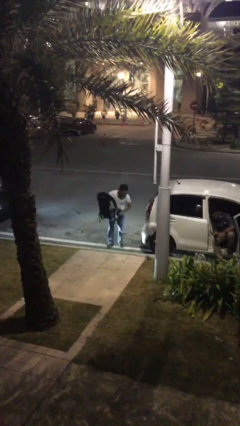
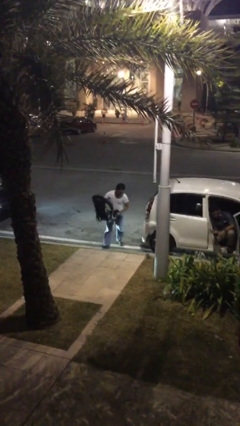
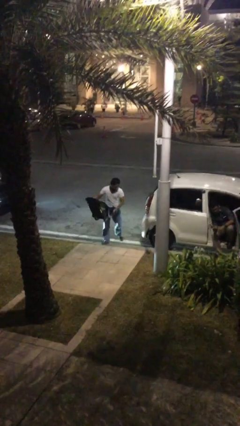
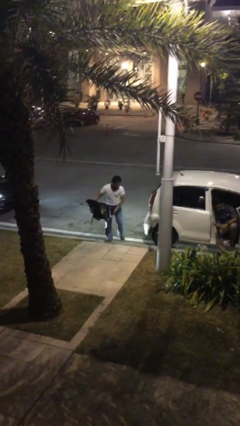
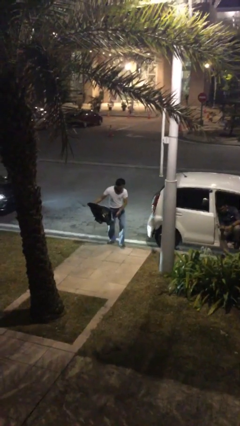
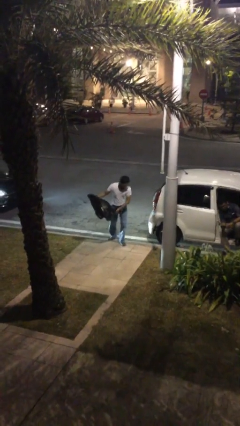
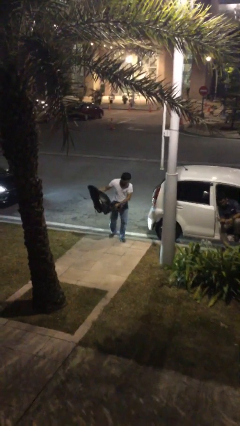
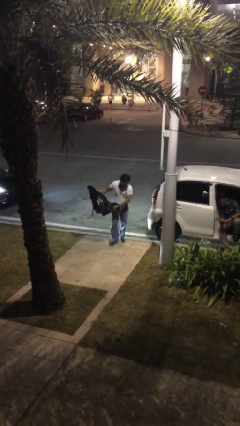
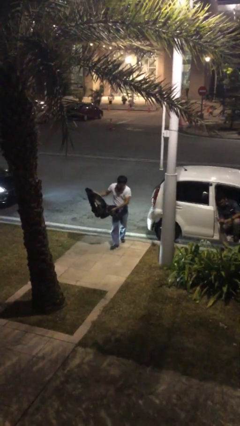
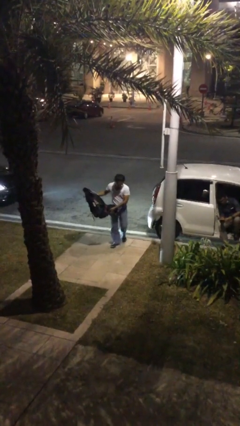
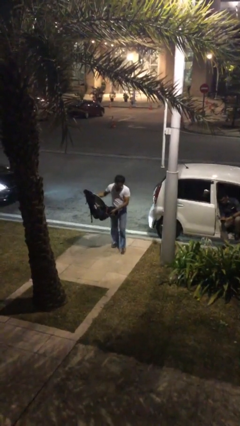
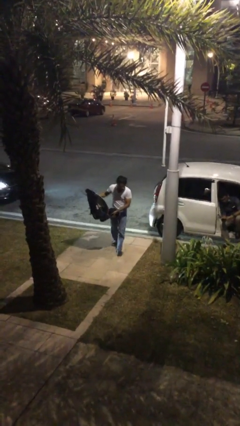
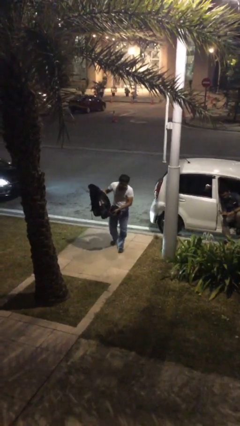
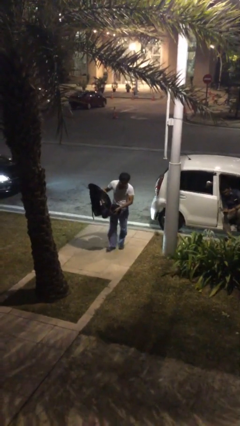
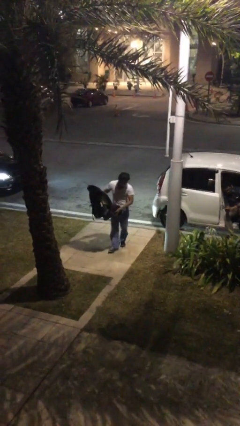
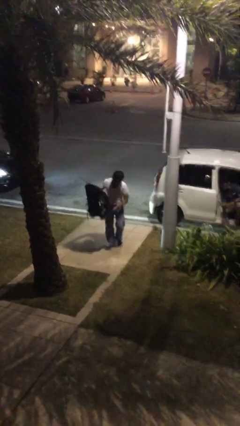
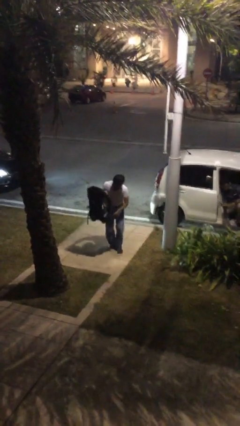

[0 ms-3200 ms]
person carries heavy object

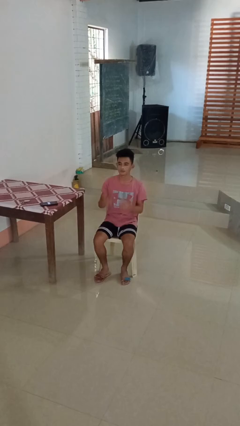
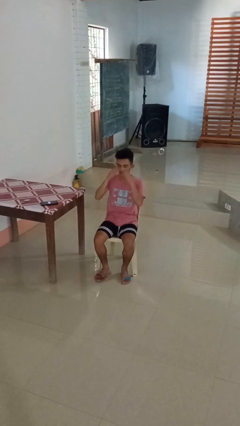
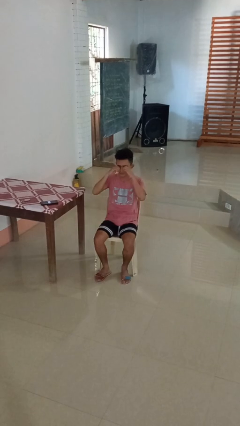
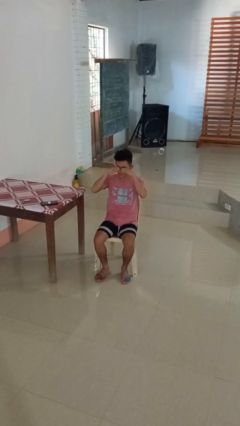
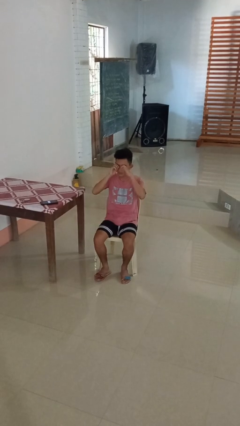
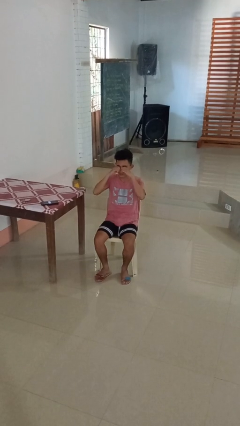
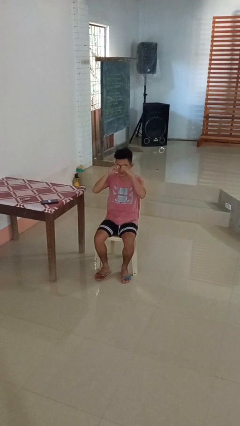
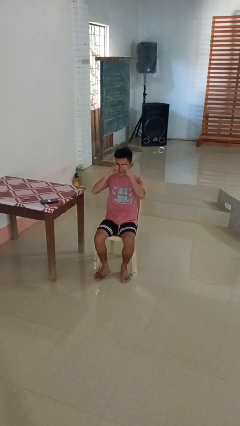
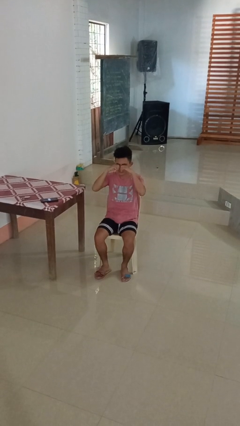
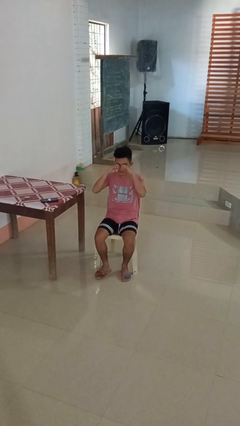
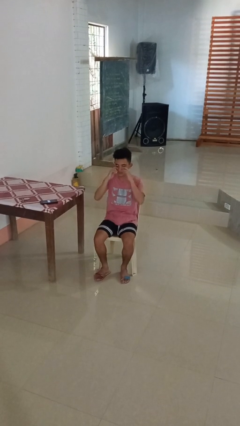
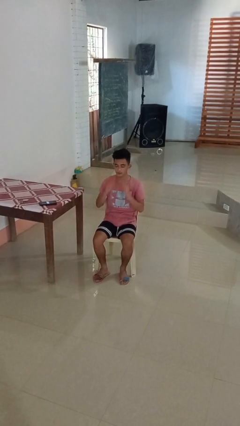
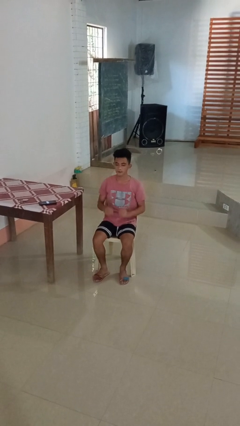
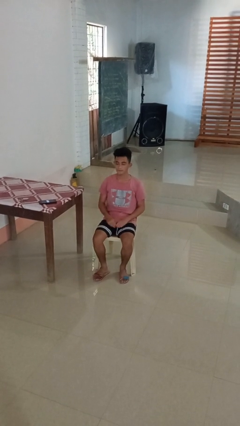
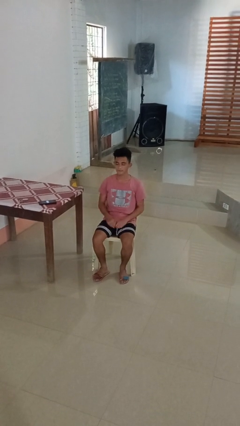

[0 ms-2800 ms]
person rubs eyes

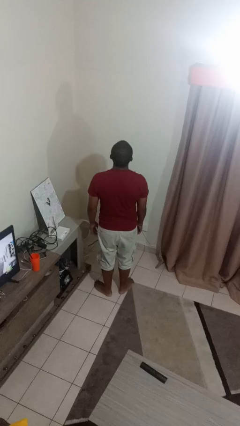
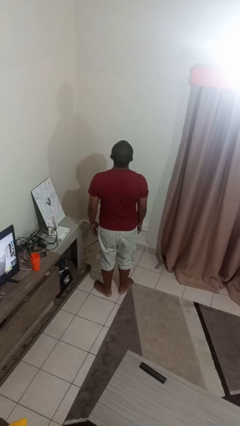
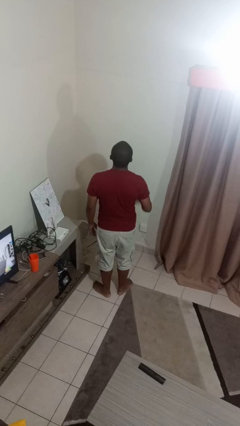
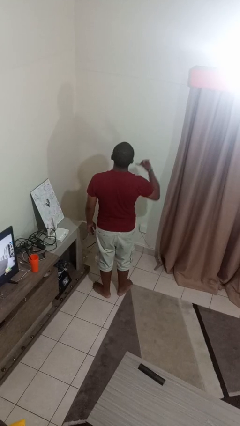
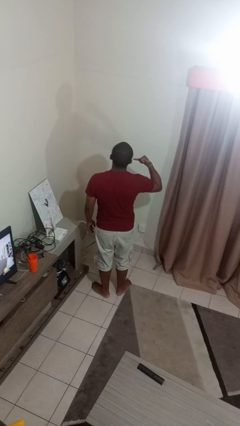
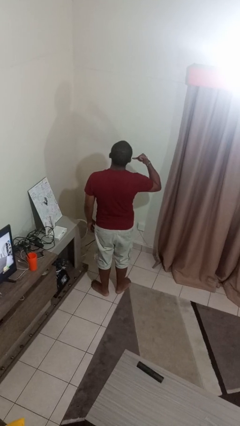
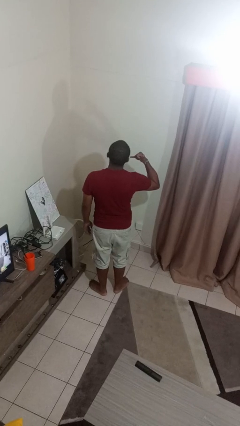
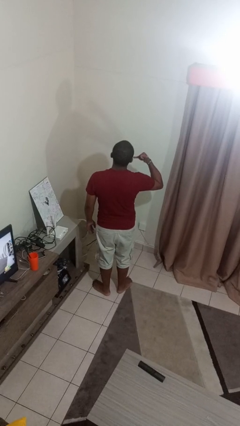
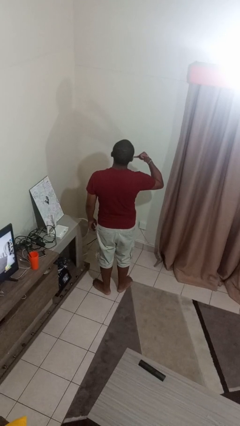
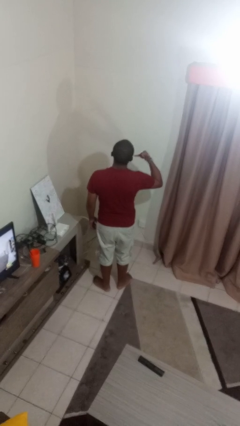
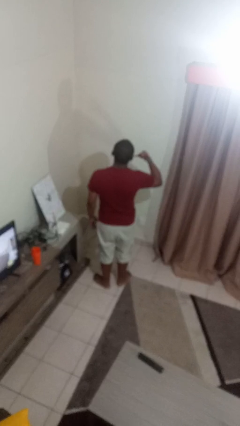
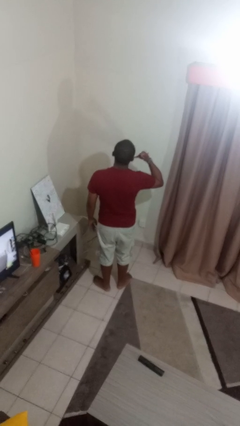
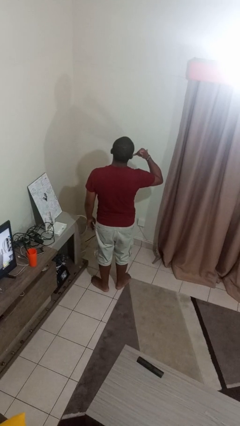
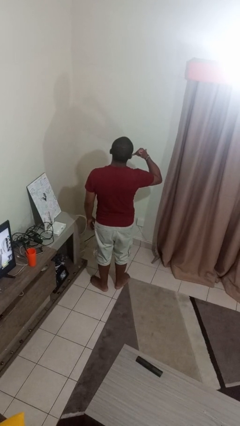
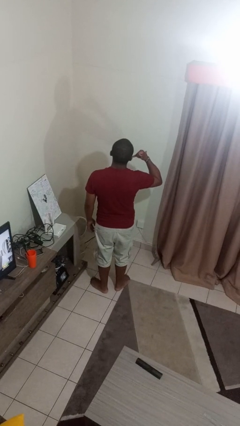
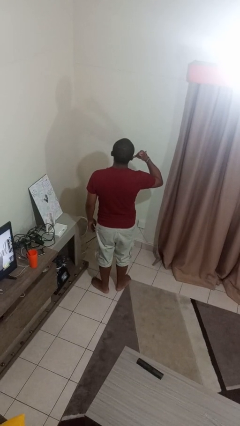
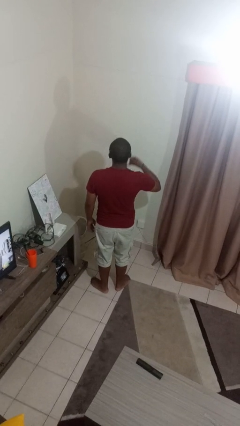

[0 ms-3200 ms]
person gestures call me

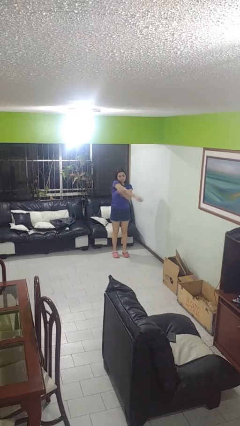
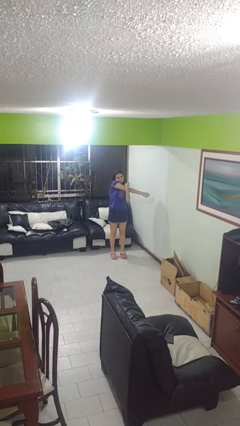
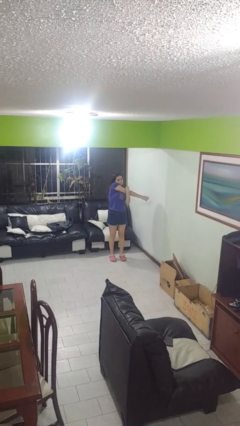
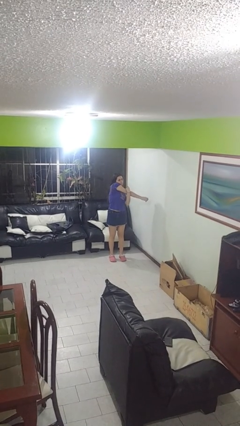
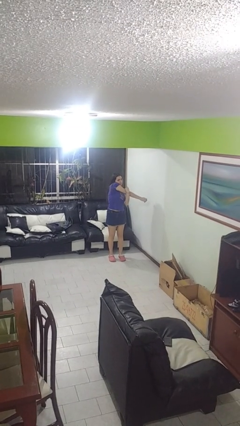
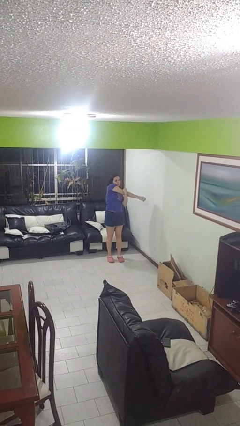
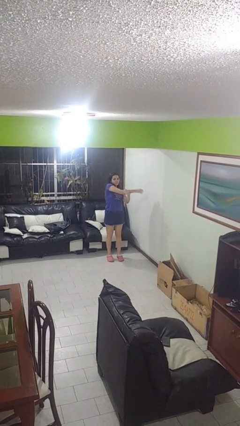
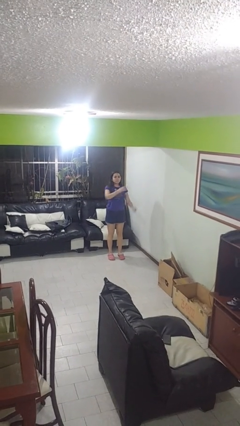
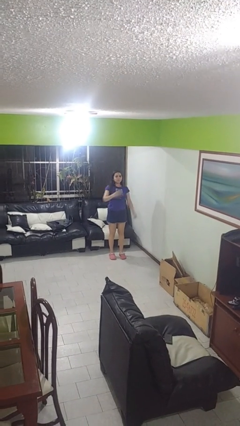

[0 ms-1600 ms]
person stretches arms to side

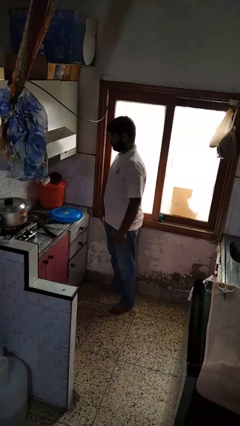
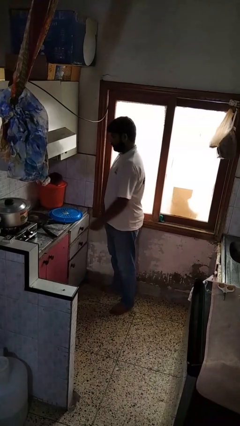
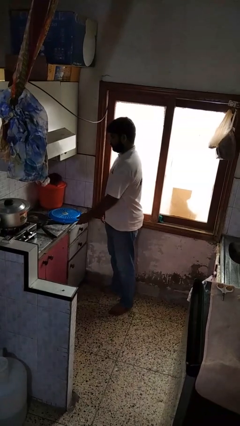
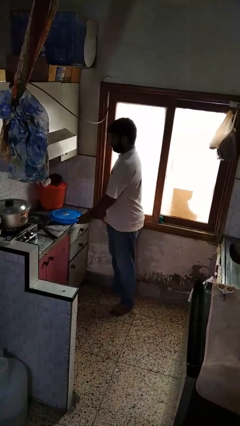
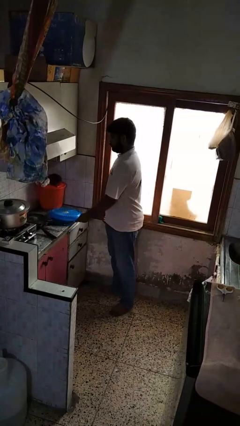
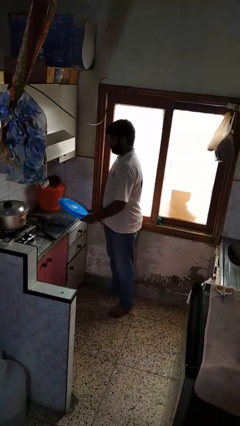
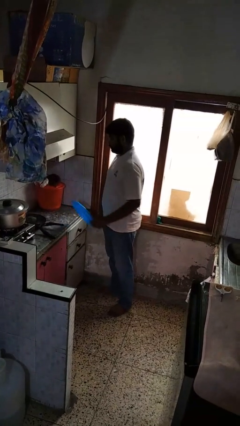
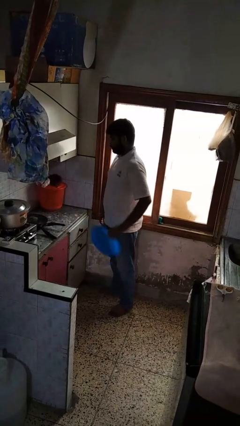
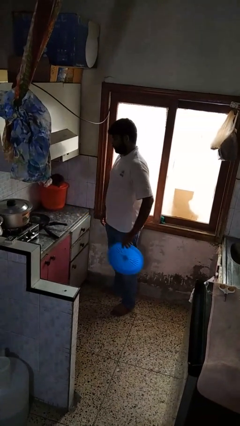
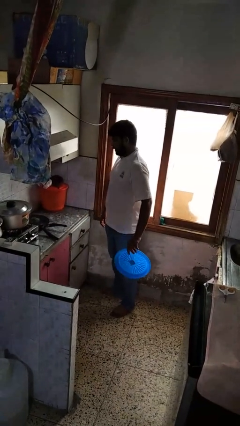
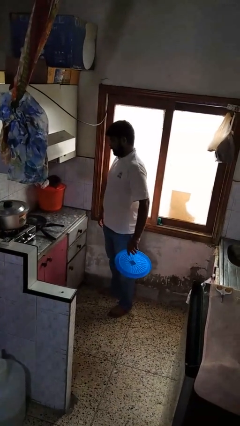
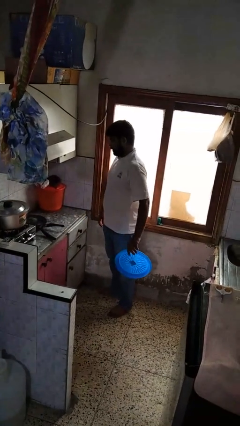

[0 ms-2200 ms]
person picks up object from countertop

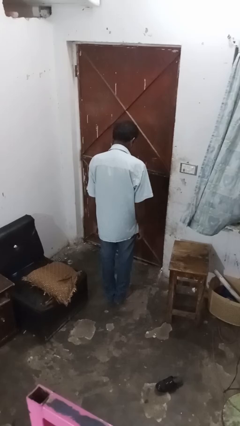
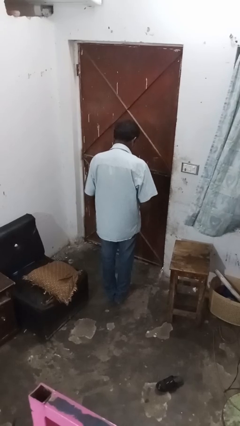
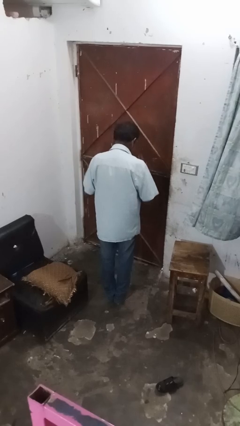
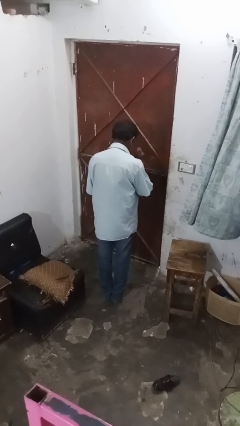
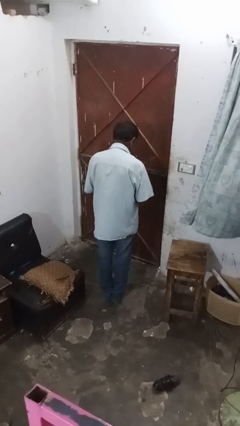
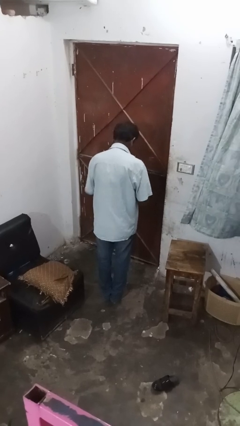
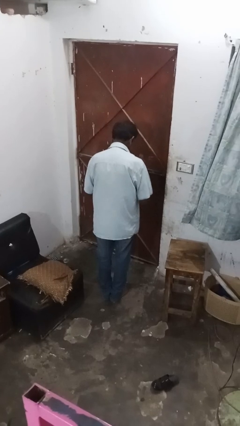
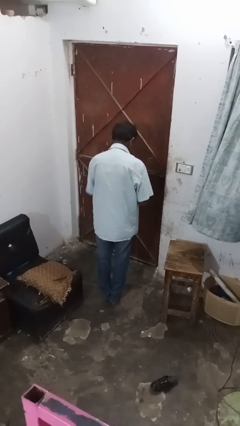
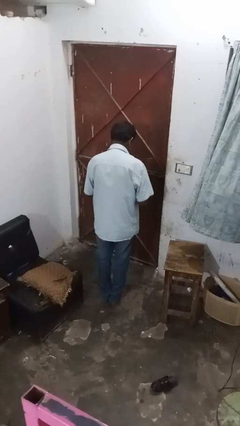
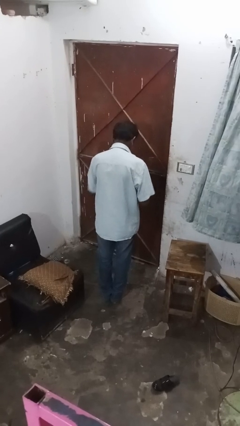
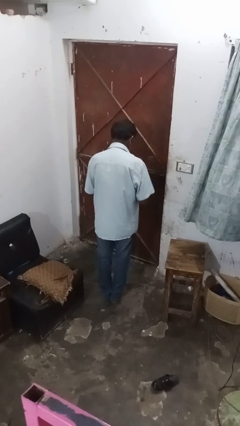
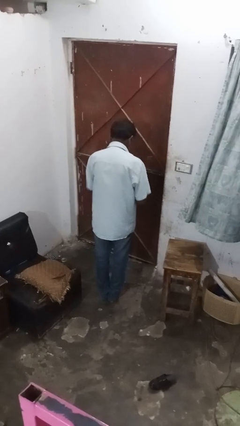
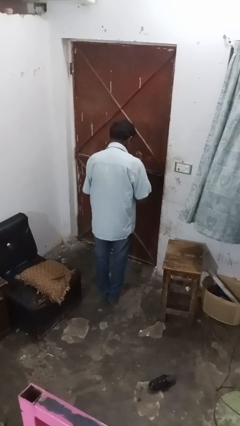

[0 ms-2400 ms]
person drums on chest

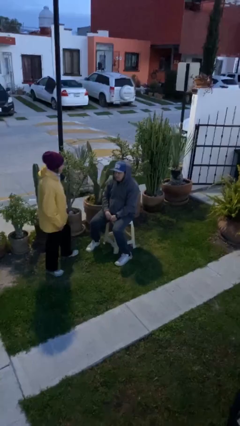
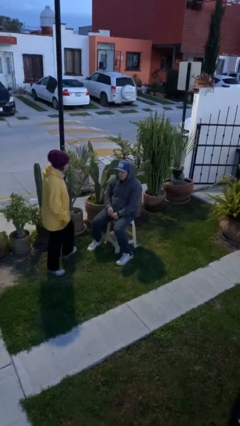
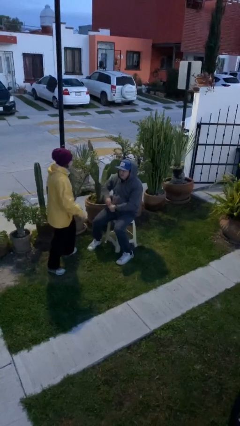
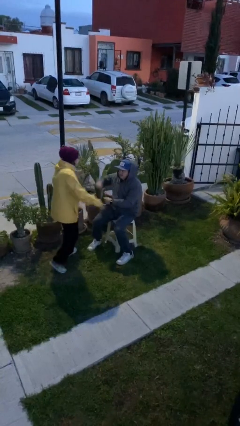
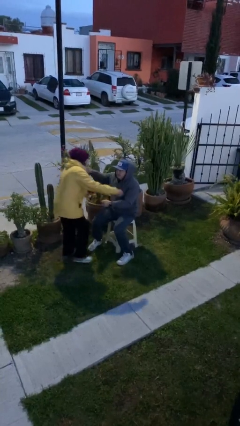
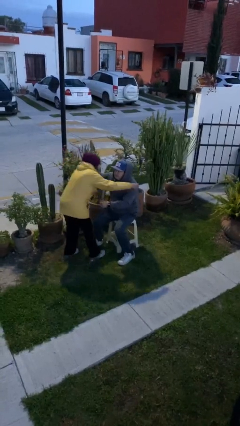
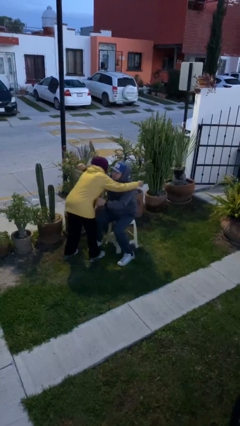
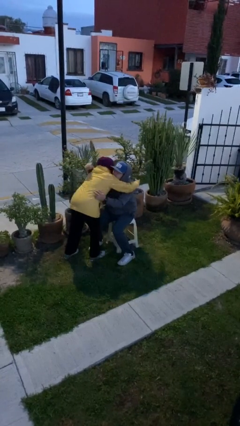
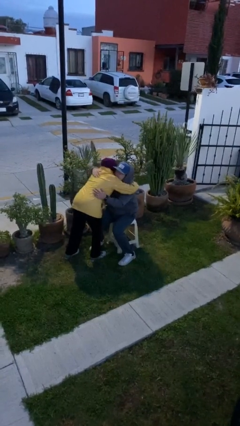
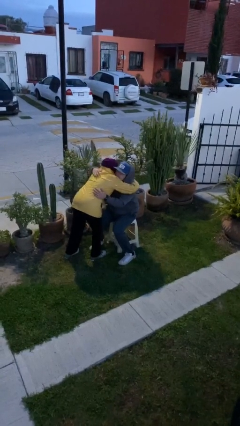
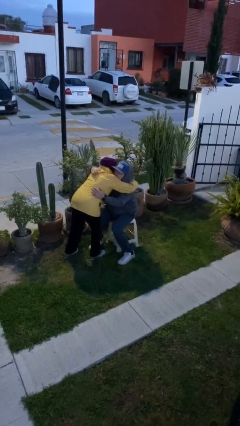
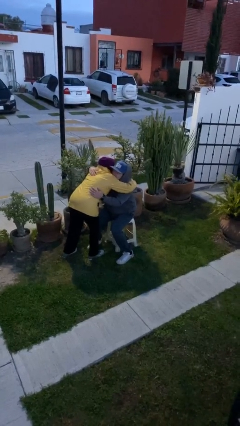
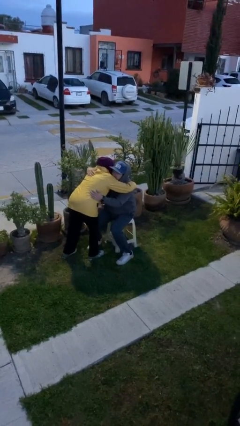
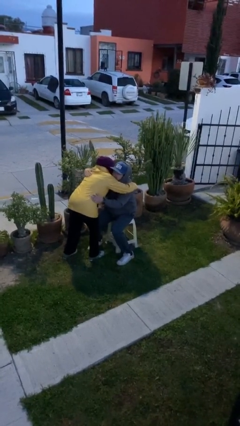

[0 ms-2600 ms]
person embraces person
